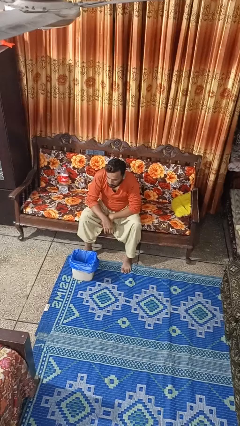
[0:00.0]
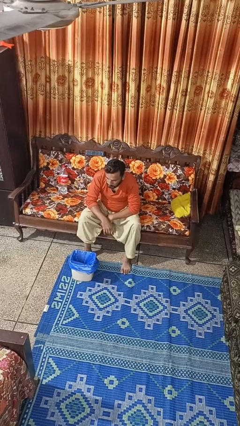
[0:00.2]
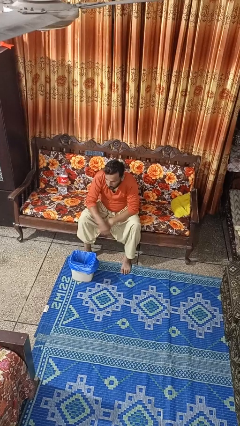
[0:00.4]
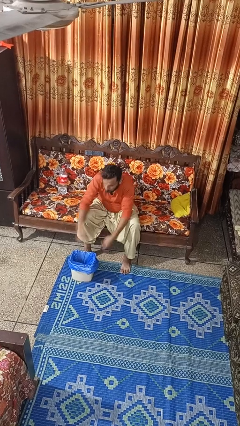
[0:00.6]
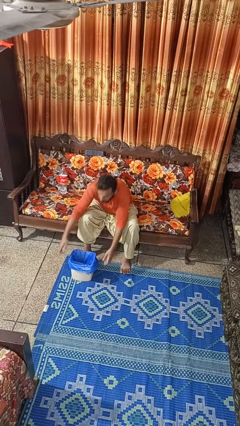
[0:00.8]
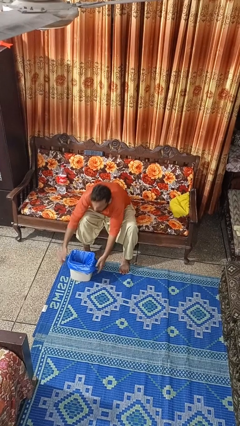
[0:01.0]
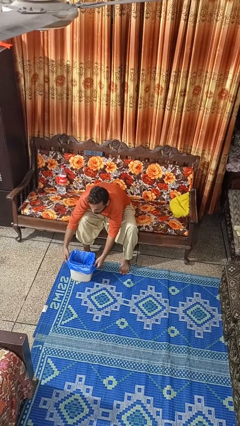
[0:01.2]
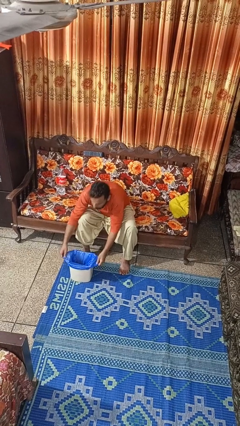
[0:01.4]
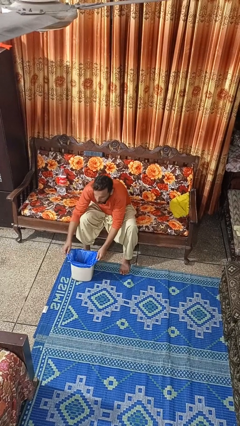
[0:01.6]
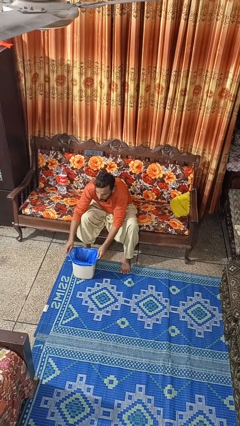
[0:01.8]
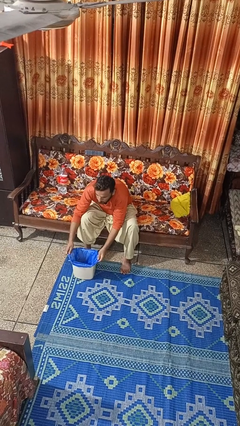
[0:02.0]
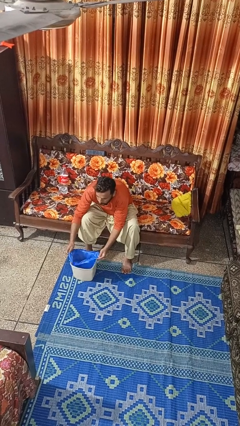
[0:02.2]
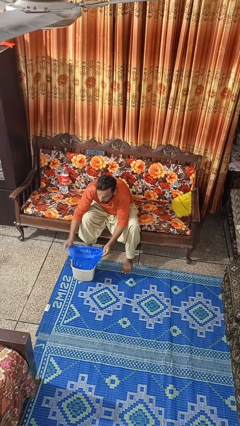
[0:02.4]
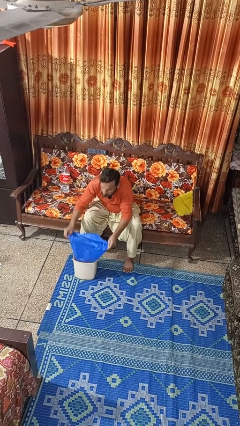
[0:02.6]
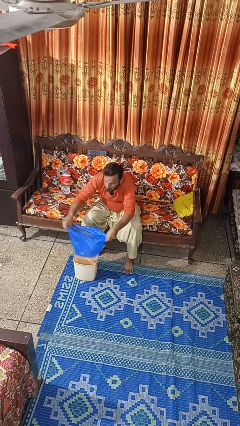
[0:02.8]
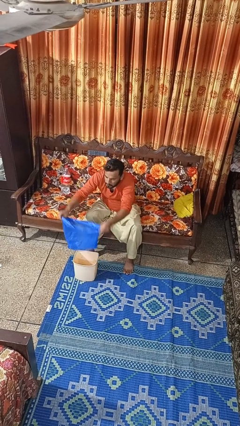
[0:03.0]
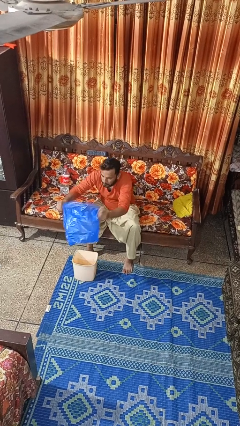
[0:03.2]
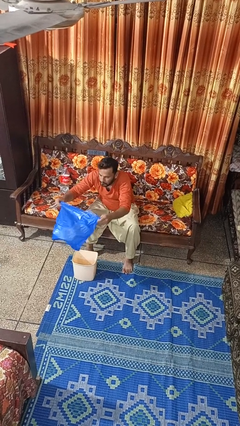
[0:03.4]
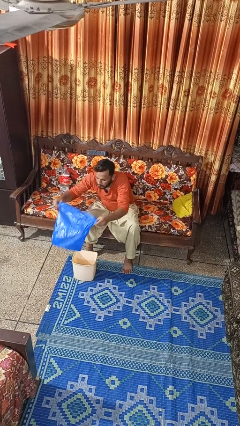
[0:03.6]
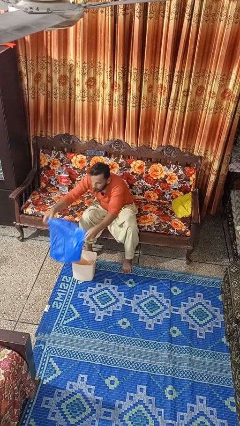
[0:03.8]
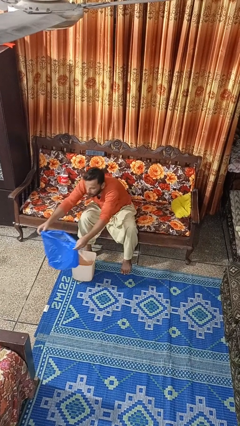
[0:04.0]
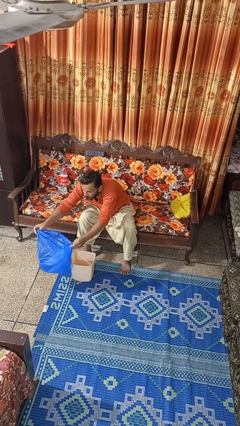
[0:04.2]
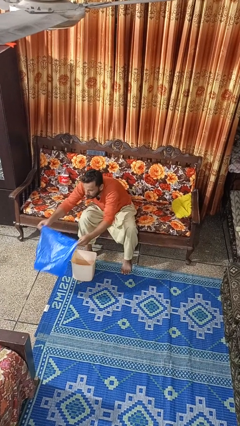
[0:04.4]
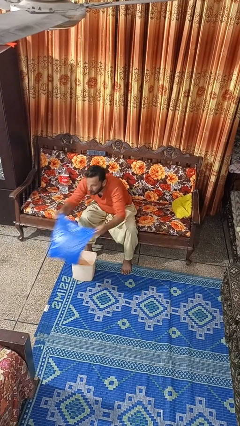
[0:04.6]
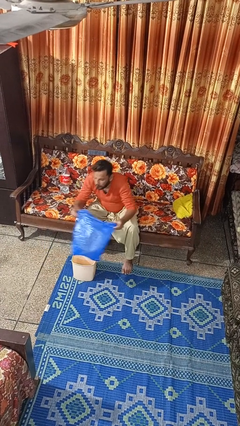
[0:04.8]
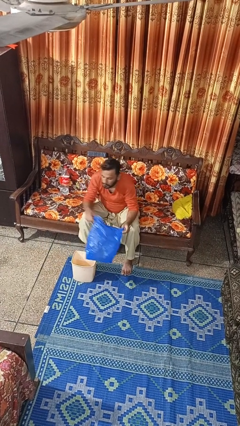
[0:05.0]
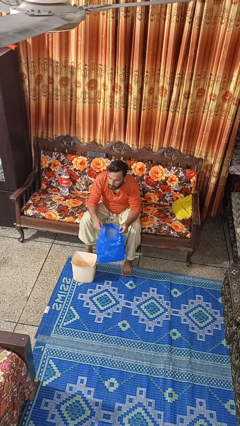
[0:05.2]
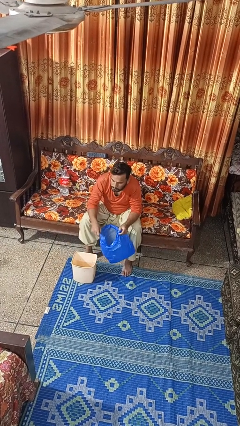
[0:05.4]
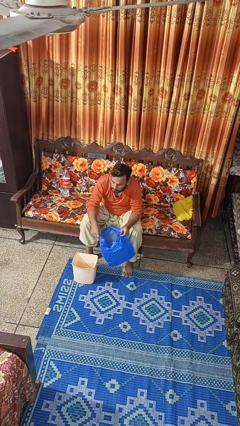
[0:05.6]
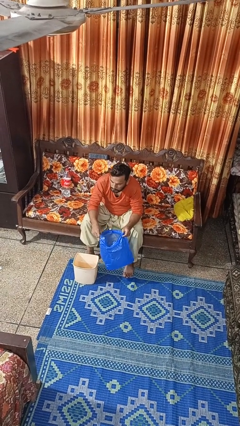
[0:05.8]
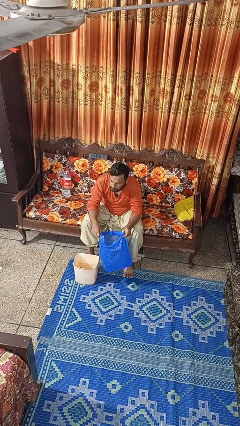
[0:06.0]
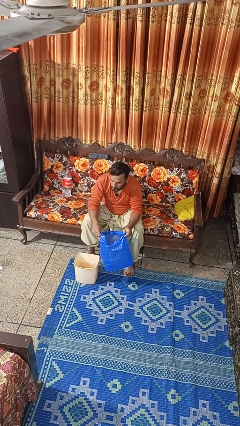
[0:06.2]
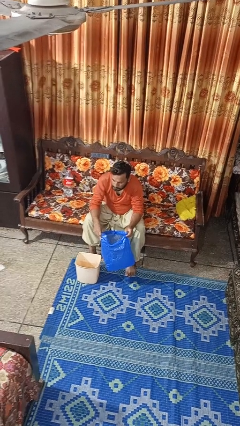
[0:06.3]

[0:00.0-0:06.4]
person removes trashbag from trashcan

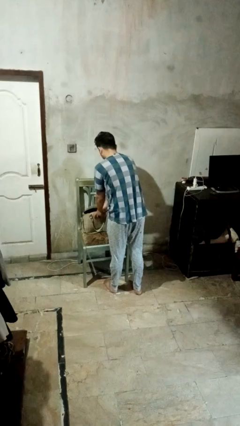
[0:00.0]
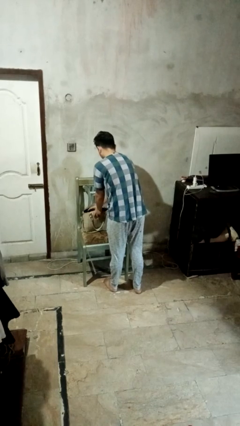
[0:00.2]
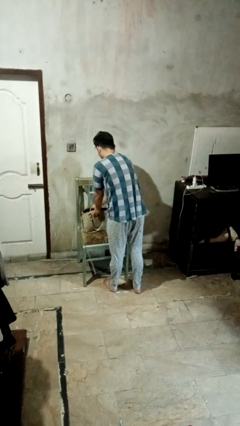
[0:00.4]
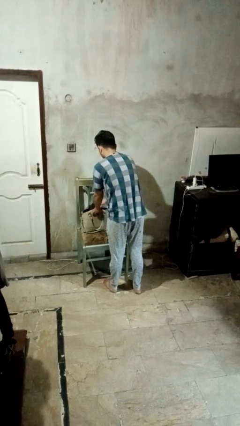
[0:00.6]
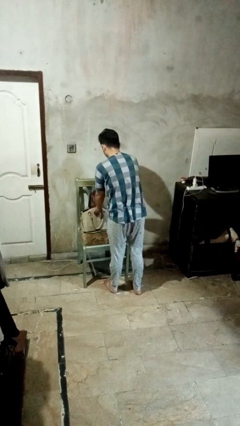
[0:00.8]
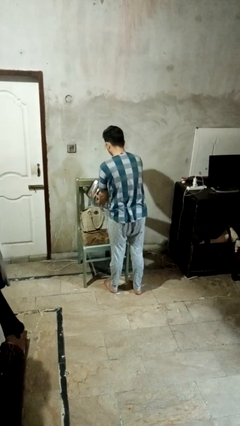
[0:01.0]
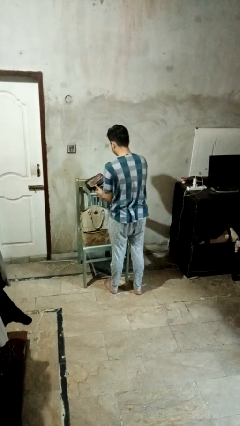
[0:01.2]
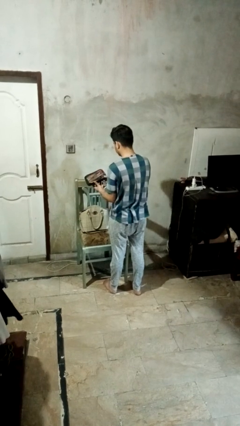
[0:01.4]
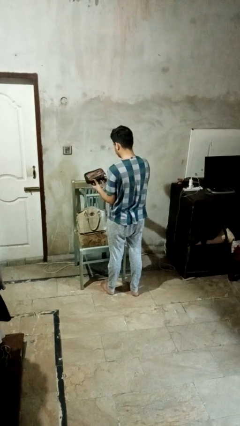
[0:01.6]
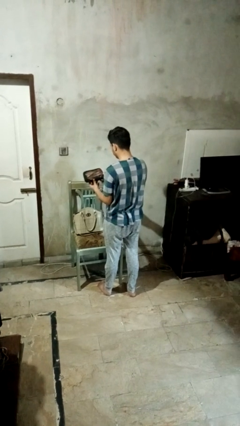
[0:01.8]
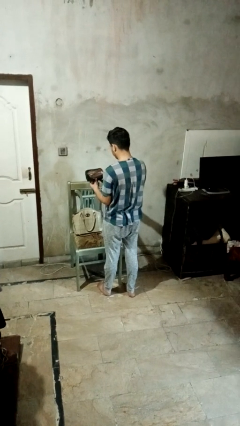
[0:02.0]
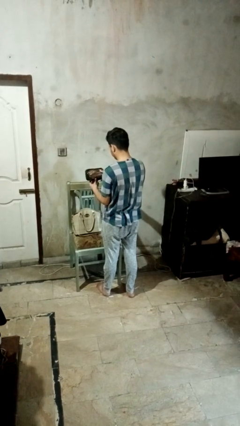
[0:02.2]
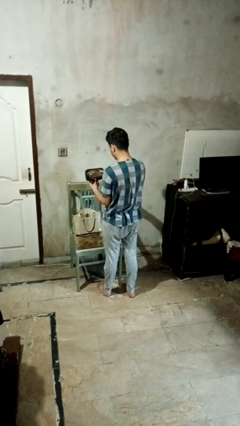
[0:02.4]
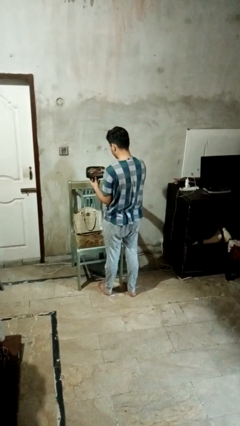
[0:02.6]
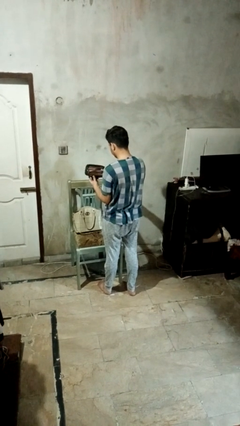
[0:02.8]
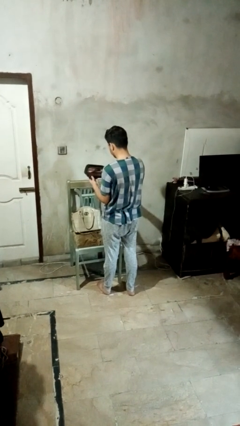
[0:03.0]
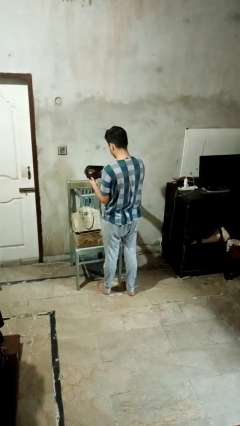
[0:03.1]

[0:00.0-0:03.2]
person takes object from purse

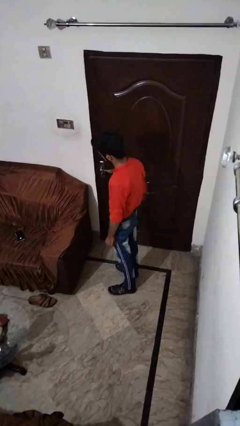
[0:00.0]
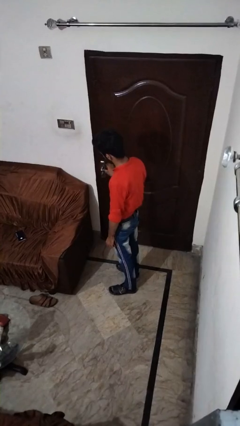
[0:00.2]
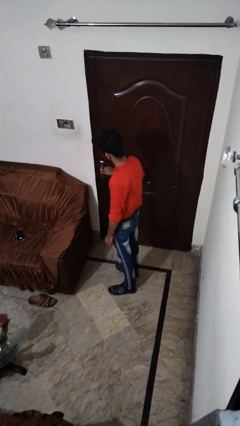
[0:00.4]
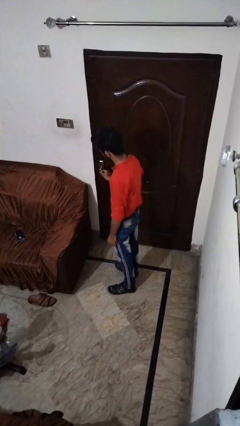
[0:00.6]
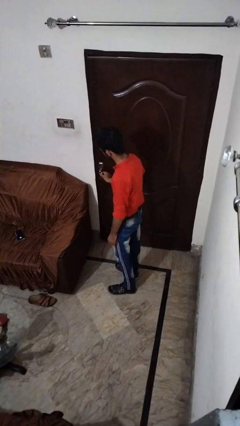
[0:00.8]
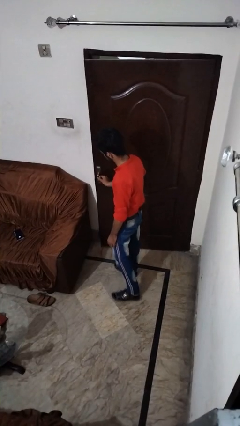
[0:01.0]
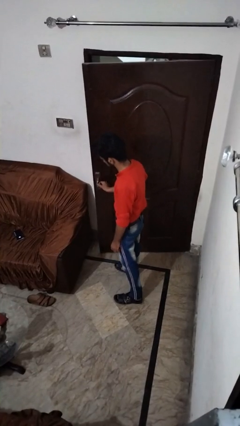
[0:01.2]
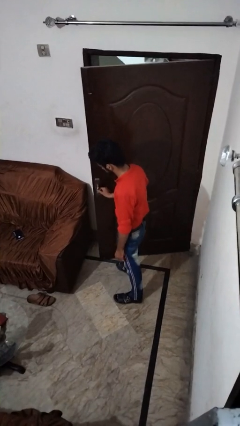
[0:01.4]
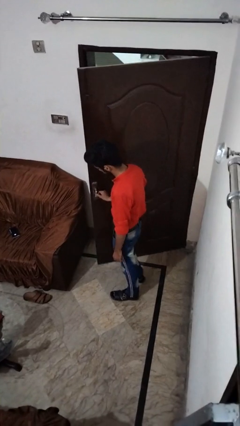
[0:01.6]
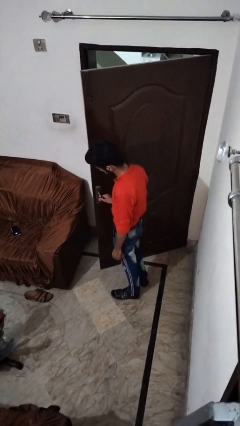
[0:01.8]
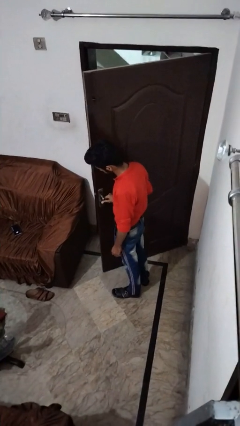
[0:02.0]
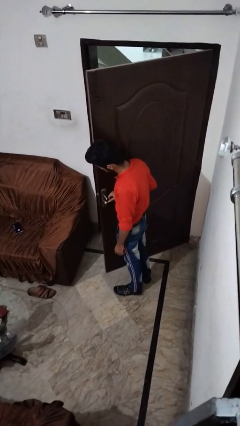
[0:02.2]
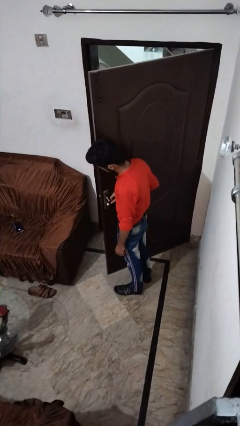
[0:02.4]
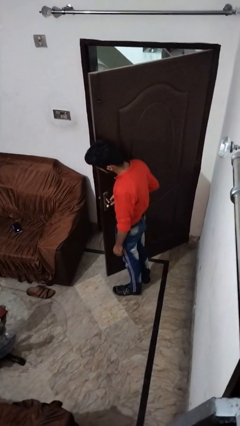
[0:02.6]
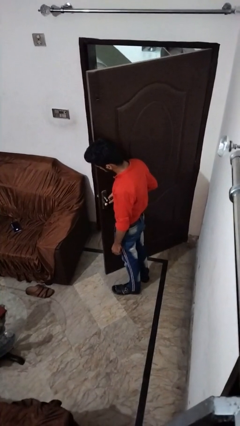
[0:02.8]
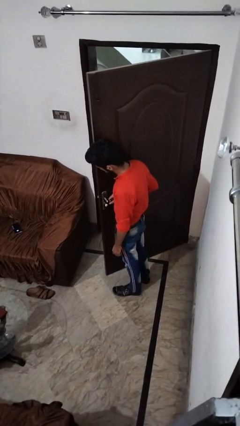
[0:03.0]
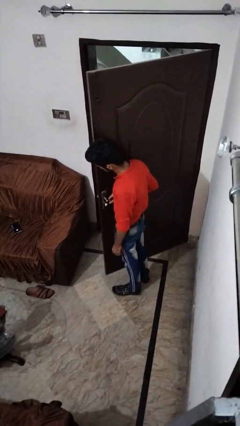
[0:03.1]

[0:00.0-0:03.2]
person opens facility door

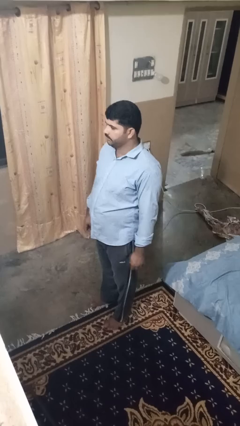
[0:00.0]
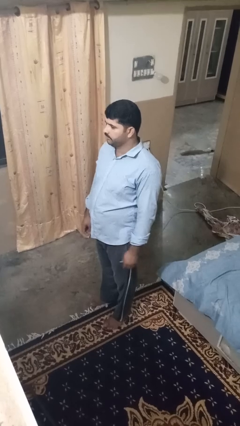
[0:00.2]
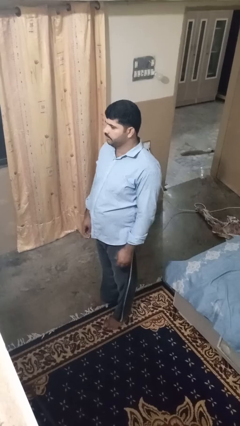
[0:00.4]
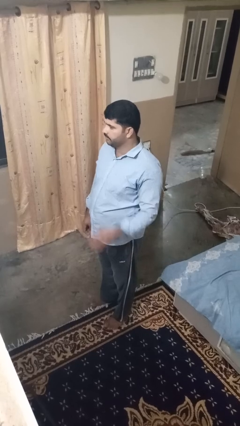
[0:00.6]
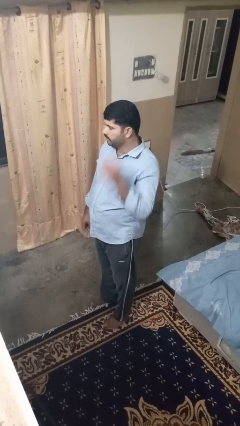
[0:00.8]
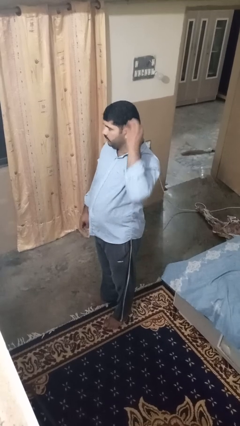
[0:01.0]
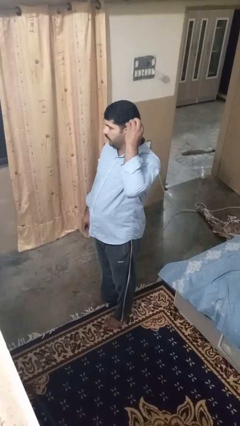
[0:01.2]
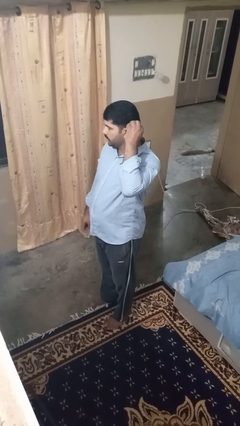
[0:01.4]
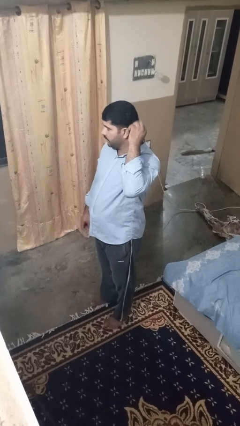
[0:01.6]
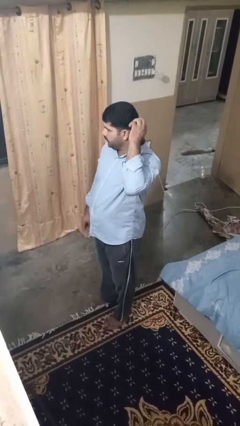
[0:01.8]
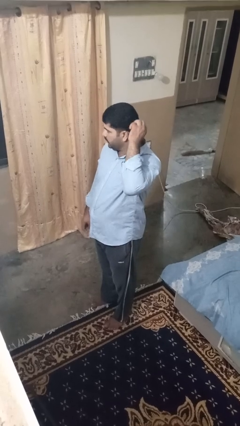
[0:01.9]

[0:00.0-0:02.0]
person strokes hair

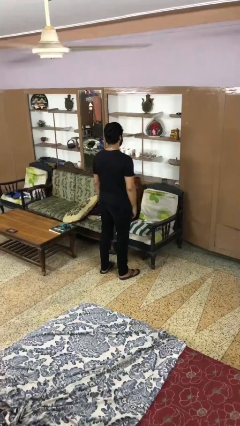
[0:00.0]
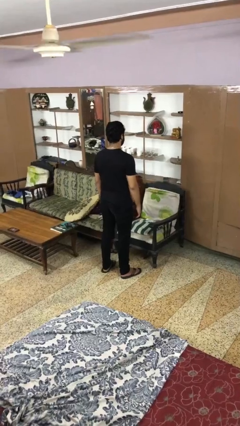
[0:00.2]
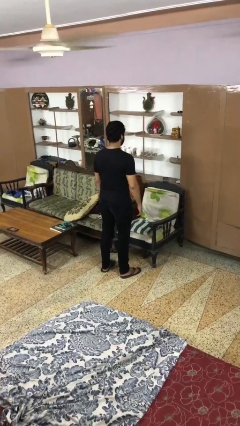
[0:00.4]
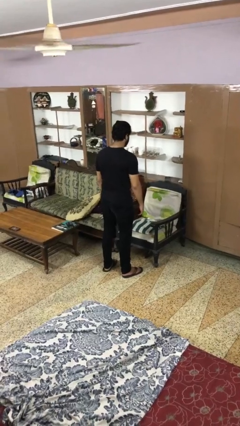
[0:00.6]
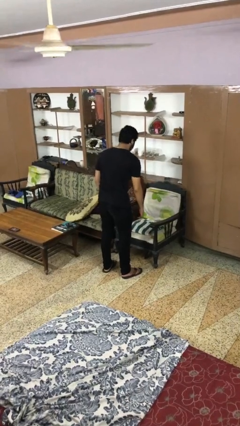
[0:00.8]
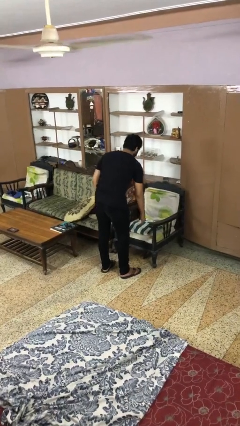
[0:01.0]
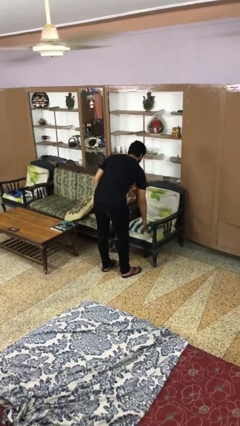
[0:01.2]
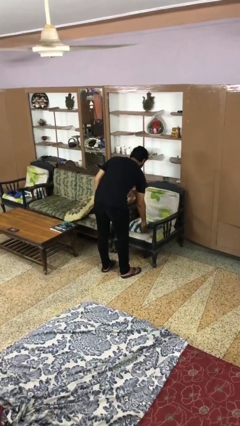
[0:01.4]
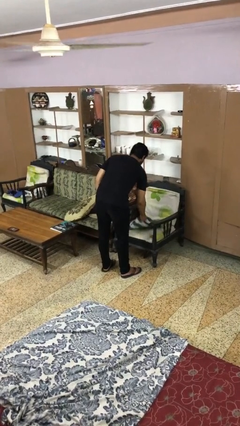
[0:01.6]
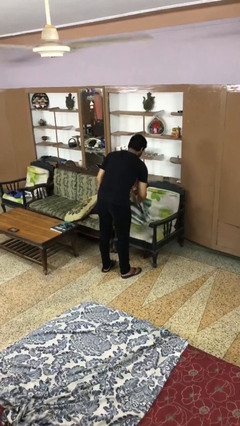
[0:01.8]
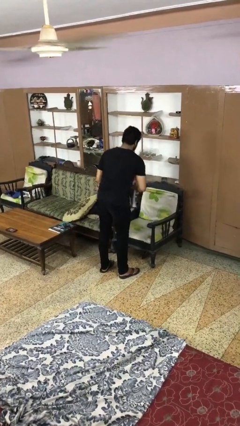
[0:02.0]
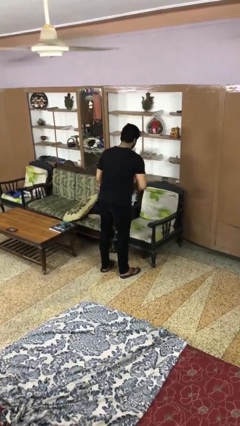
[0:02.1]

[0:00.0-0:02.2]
person picks up object from couch

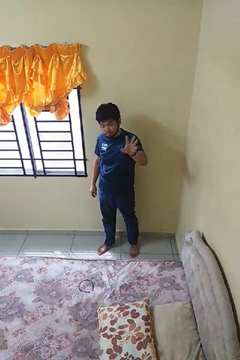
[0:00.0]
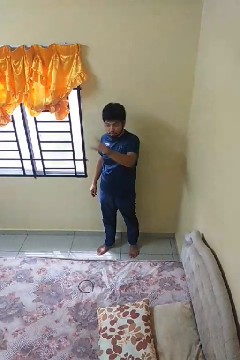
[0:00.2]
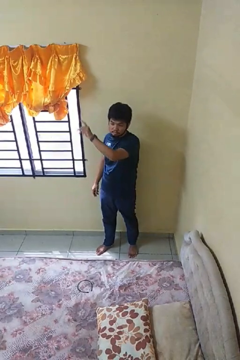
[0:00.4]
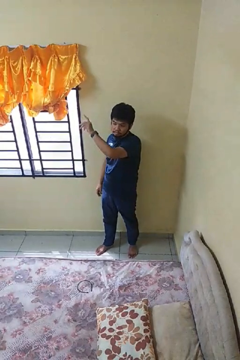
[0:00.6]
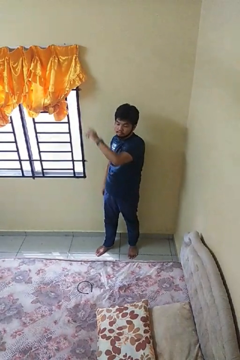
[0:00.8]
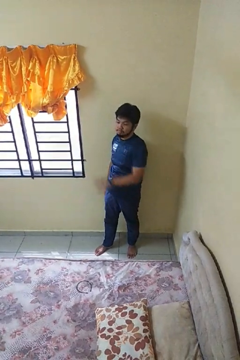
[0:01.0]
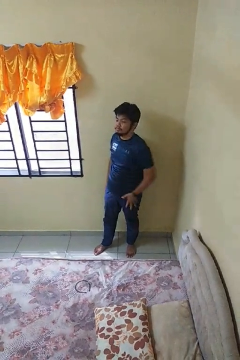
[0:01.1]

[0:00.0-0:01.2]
person gestures swipe right
